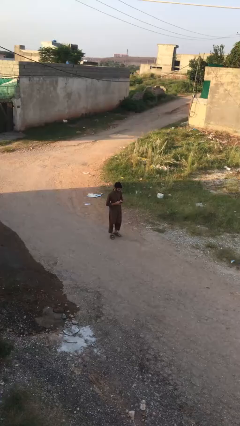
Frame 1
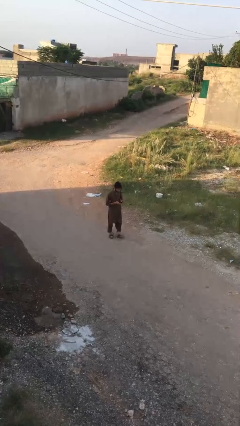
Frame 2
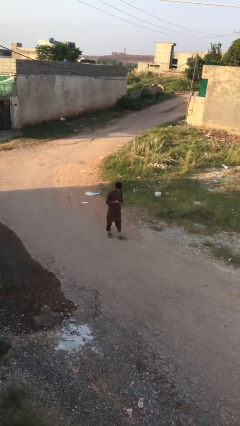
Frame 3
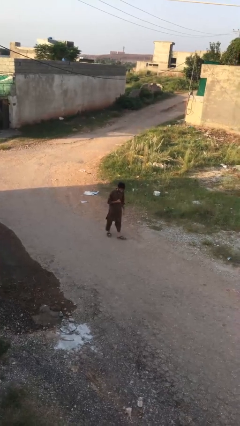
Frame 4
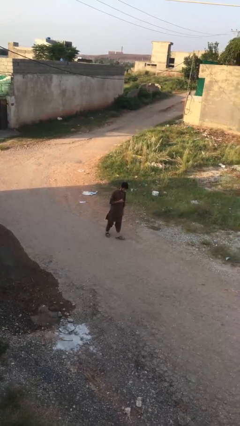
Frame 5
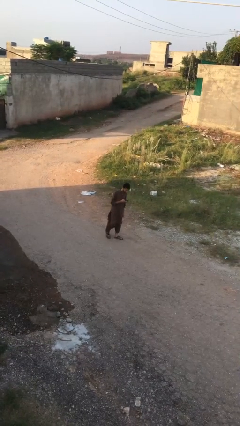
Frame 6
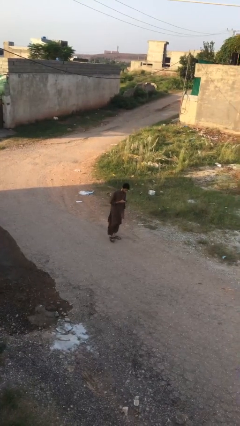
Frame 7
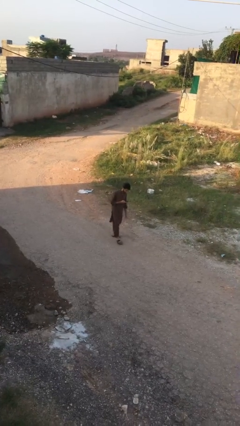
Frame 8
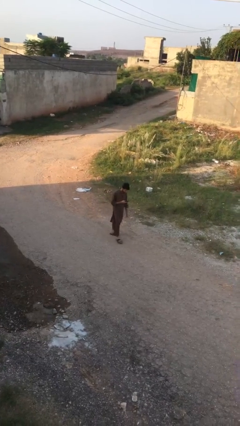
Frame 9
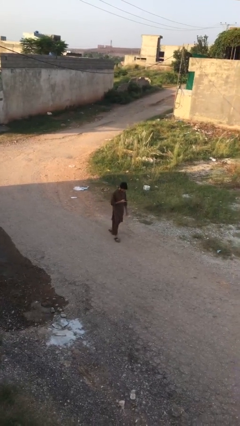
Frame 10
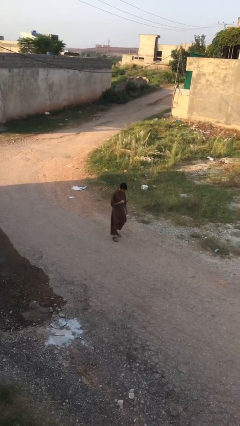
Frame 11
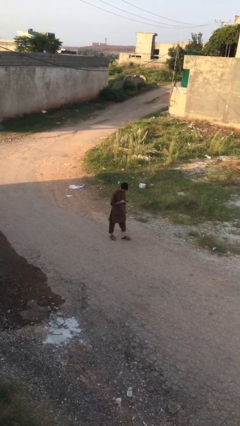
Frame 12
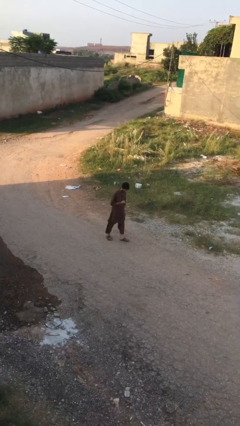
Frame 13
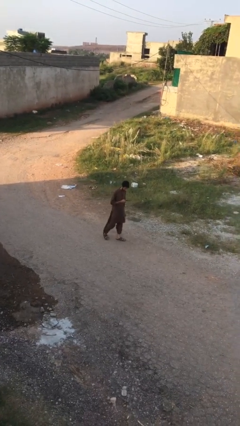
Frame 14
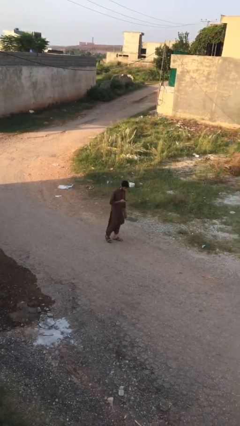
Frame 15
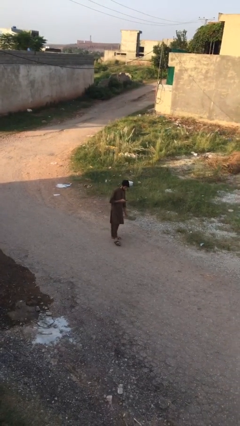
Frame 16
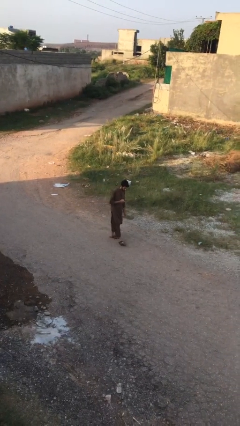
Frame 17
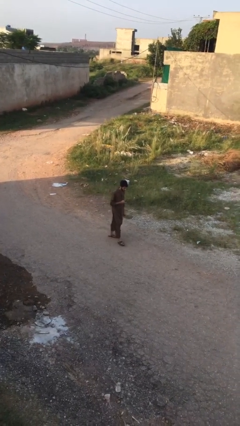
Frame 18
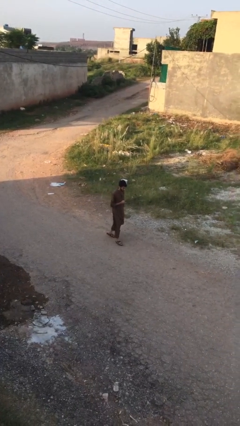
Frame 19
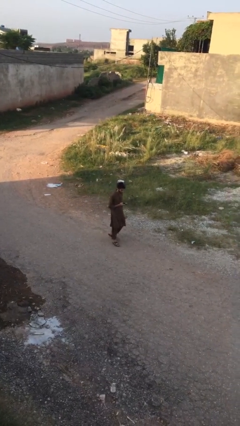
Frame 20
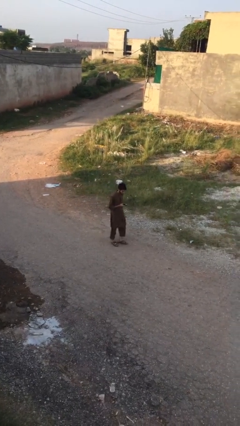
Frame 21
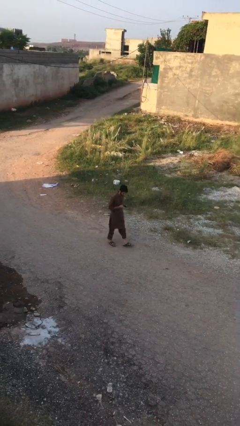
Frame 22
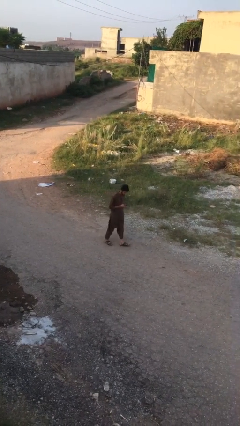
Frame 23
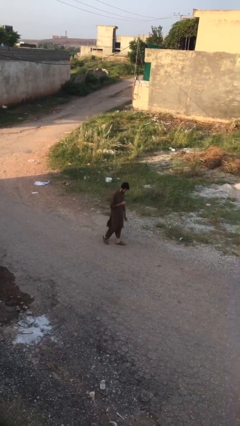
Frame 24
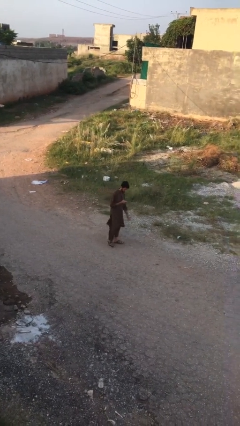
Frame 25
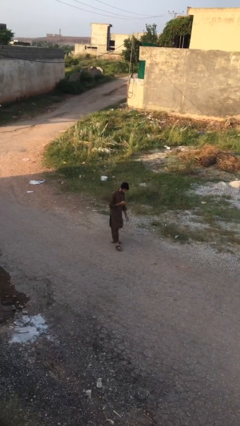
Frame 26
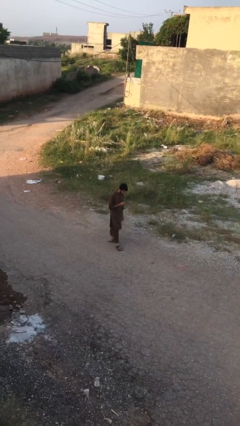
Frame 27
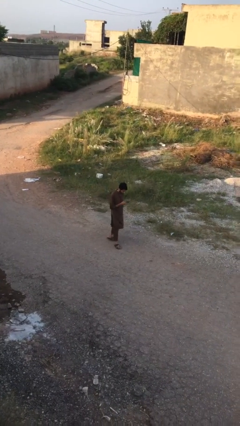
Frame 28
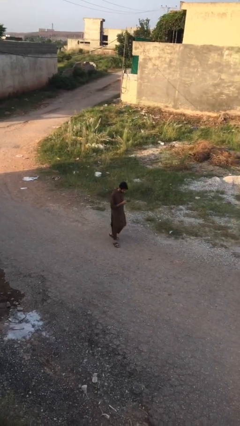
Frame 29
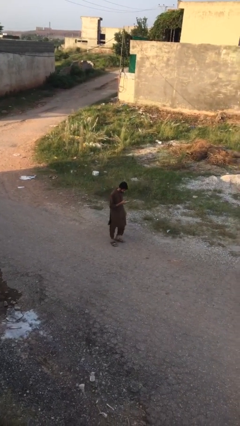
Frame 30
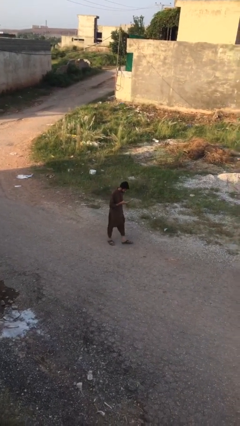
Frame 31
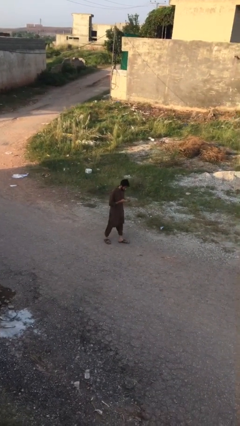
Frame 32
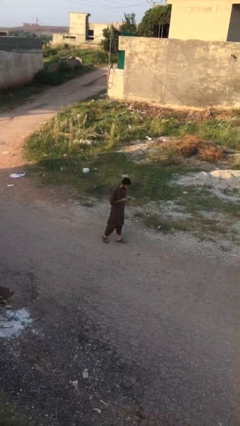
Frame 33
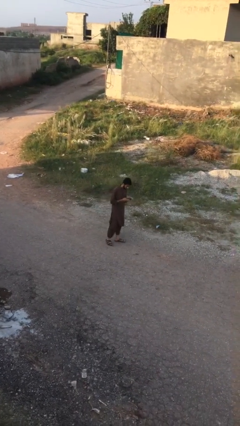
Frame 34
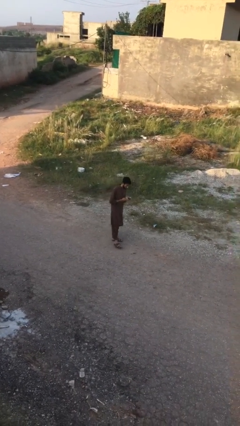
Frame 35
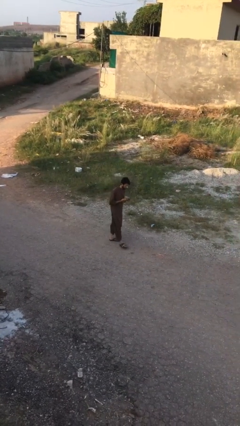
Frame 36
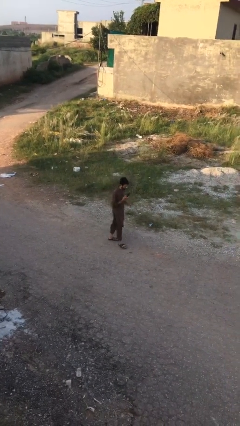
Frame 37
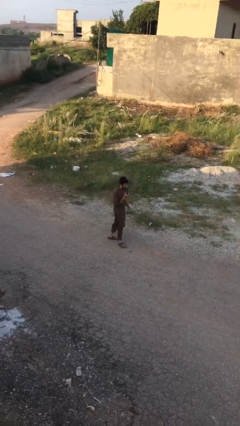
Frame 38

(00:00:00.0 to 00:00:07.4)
person texts on phone

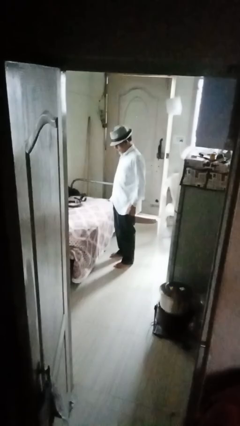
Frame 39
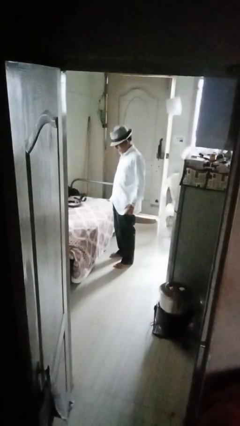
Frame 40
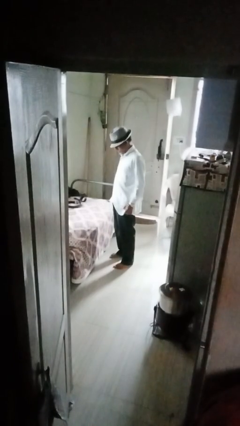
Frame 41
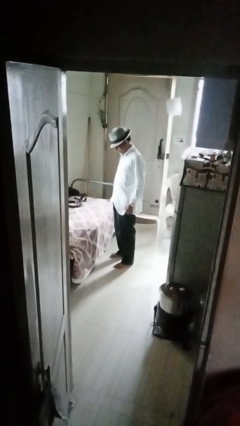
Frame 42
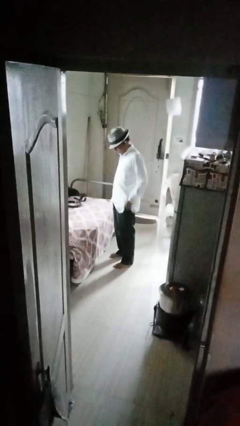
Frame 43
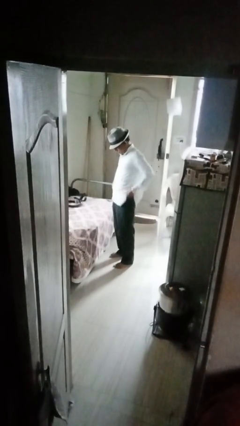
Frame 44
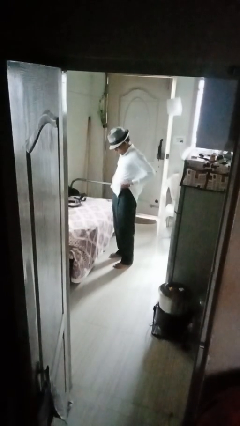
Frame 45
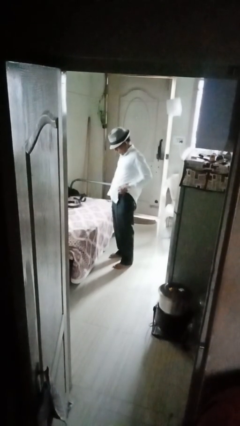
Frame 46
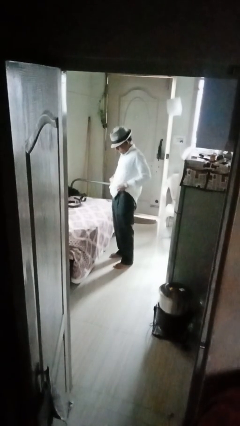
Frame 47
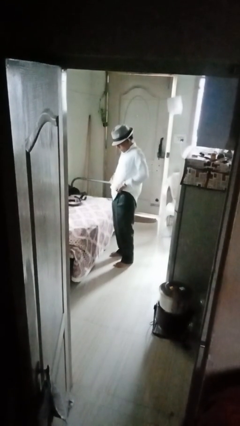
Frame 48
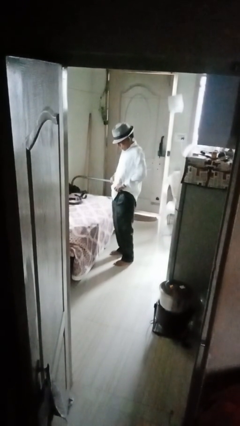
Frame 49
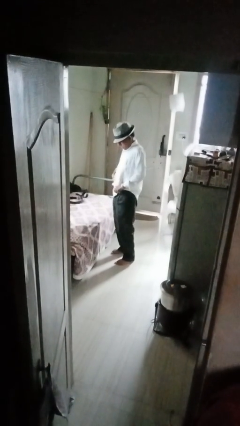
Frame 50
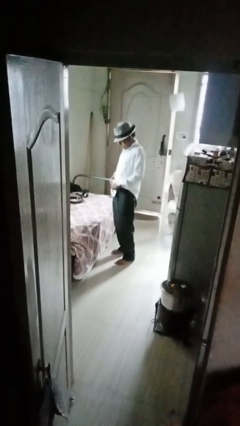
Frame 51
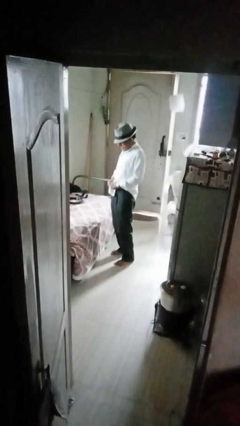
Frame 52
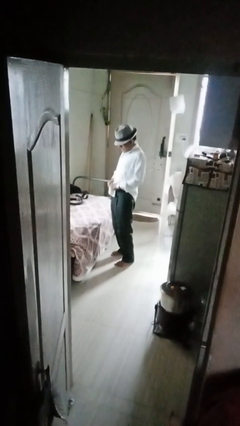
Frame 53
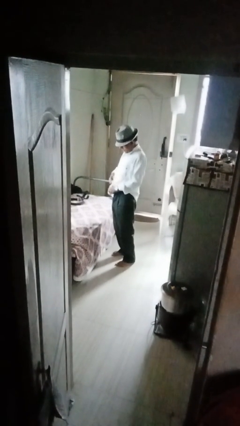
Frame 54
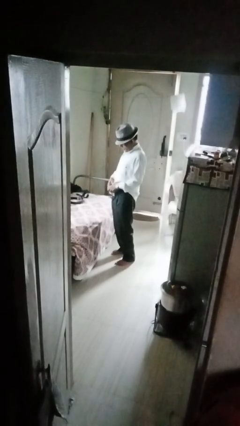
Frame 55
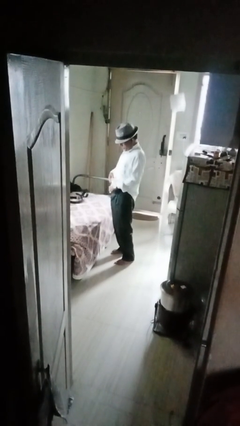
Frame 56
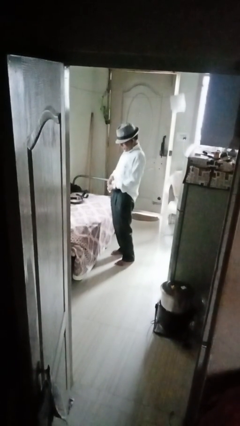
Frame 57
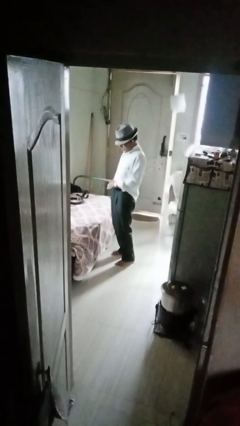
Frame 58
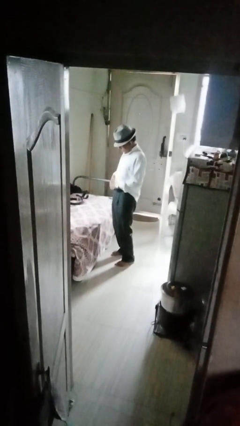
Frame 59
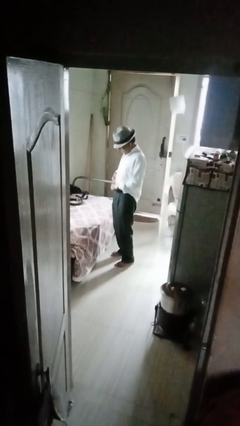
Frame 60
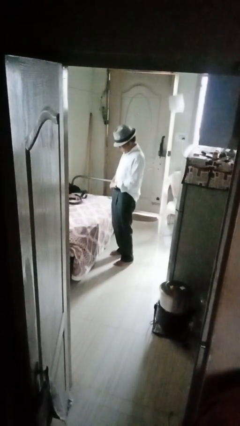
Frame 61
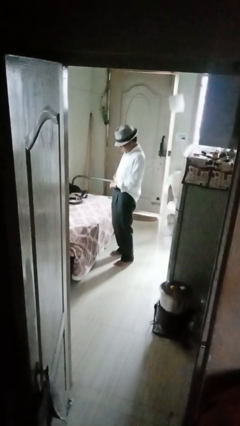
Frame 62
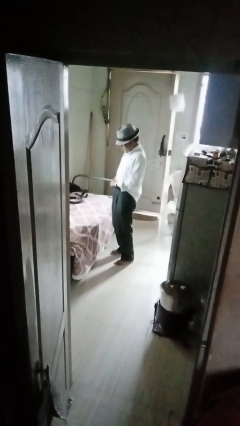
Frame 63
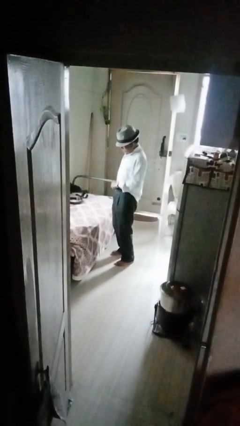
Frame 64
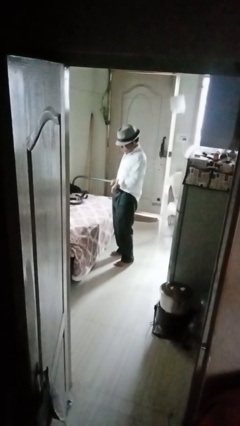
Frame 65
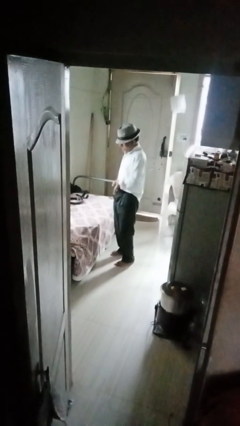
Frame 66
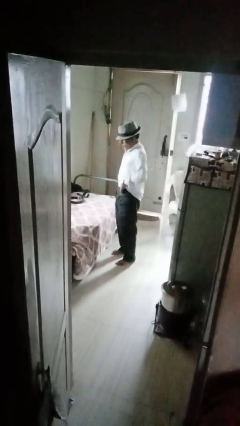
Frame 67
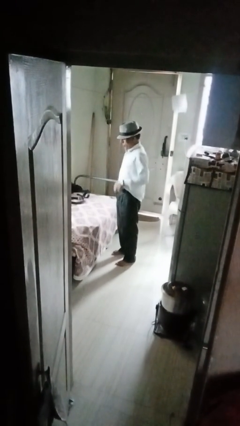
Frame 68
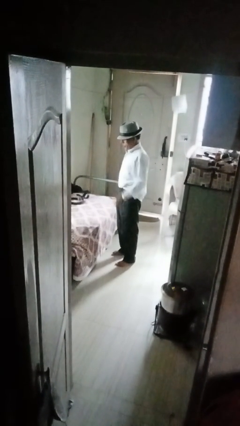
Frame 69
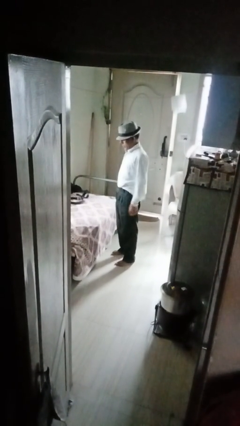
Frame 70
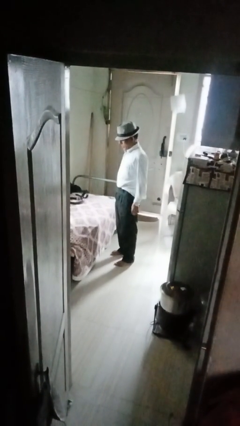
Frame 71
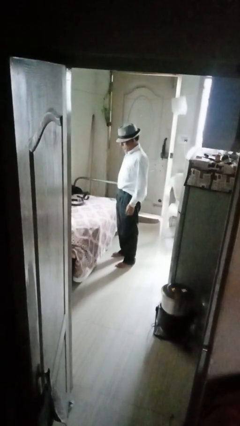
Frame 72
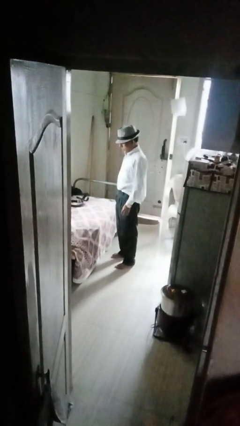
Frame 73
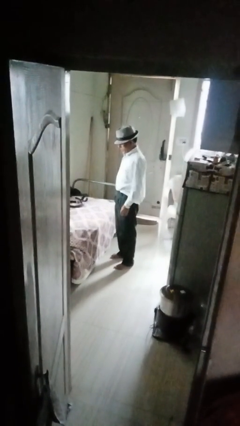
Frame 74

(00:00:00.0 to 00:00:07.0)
person tucks in shirt

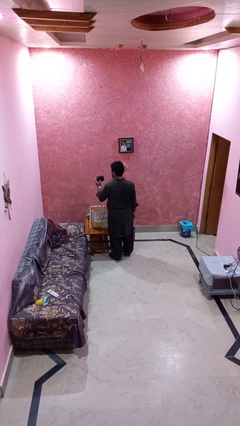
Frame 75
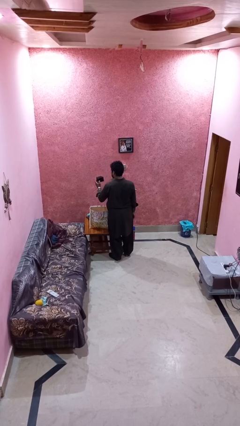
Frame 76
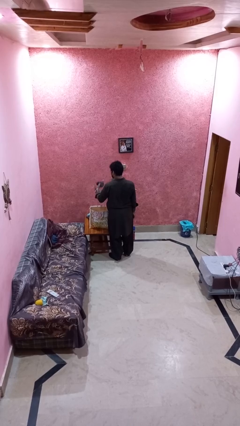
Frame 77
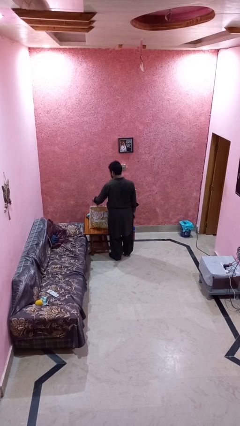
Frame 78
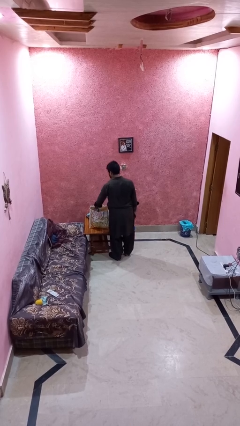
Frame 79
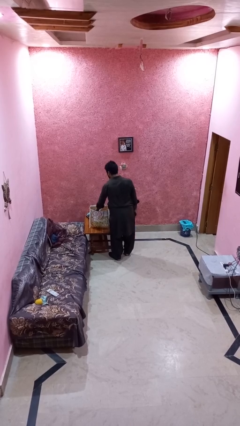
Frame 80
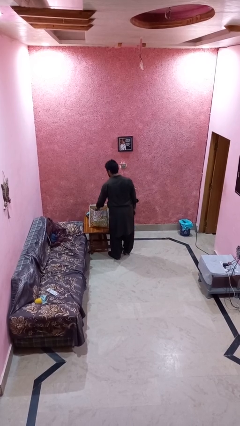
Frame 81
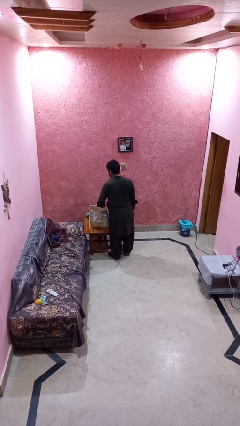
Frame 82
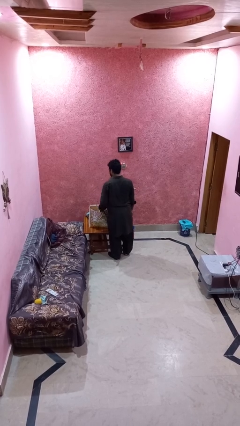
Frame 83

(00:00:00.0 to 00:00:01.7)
person puts object into bag

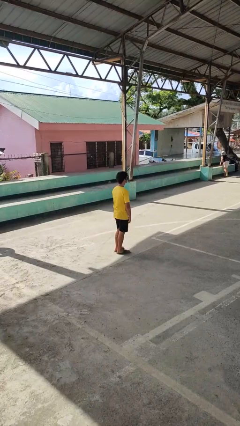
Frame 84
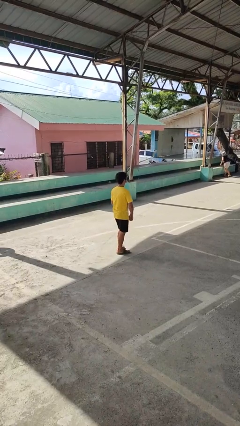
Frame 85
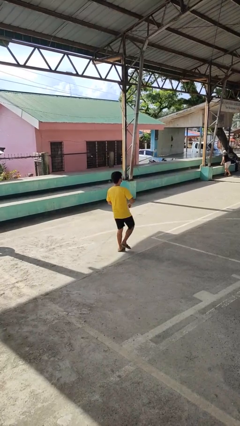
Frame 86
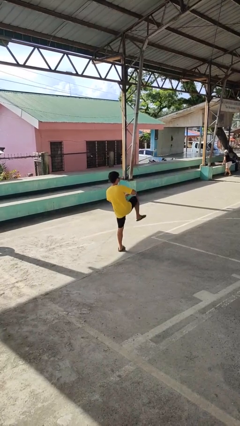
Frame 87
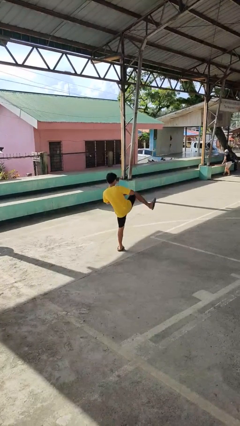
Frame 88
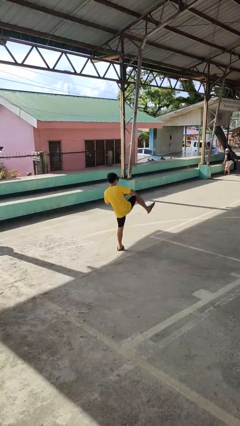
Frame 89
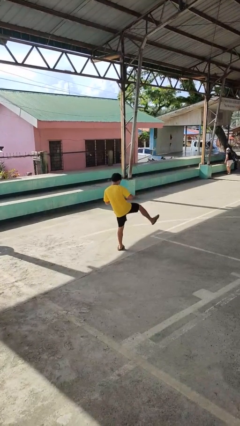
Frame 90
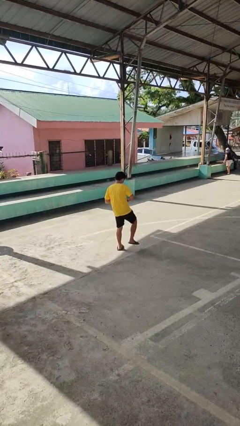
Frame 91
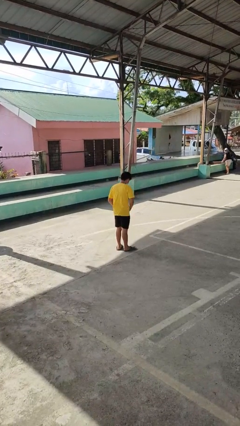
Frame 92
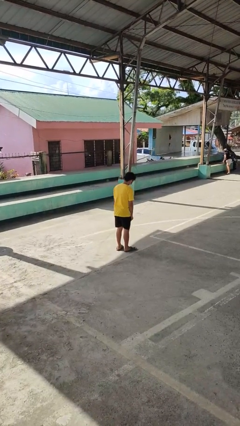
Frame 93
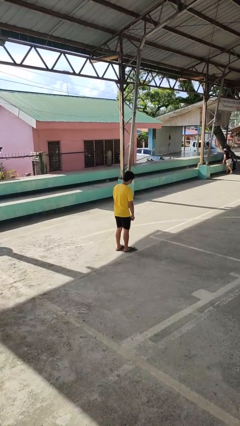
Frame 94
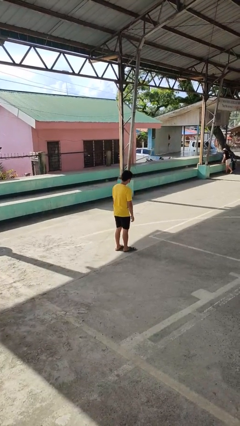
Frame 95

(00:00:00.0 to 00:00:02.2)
person karate kicks
